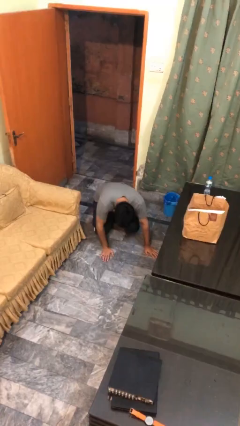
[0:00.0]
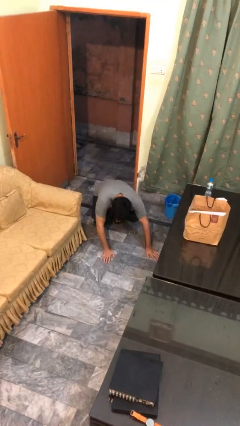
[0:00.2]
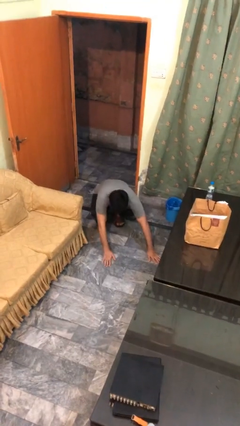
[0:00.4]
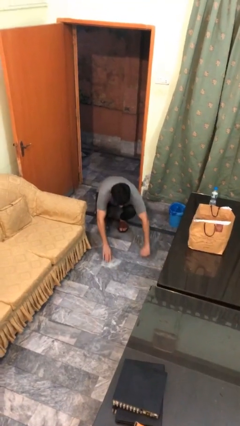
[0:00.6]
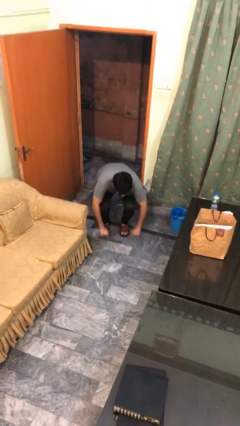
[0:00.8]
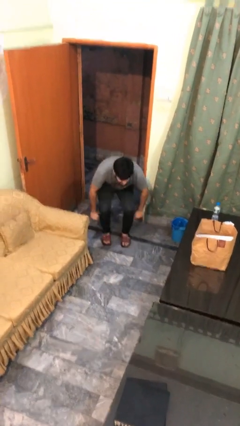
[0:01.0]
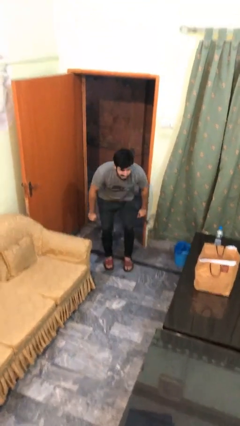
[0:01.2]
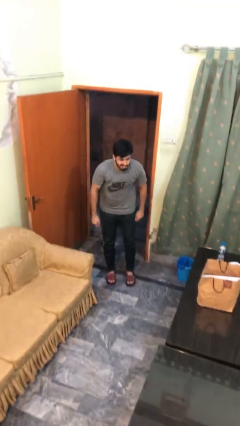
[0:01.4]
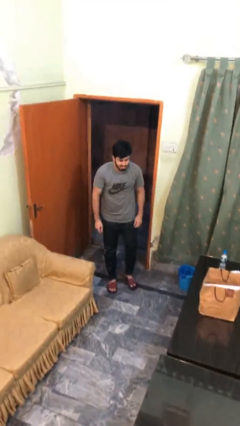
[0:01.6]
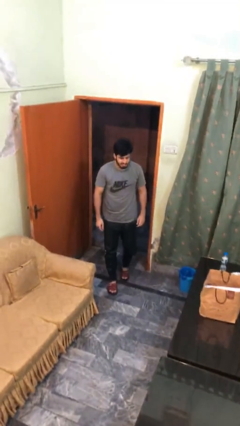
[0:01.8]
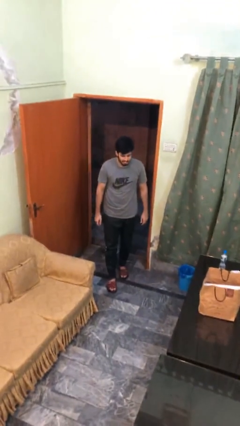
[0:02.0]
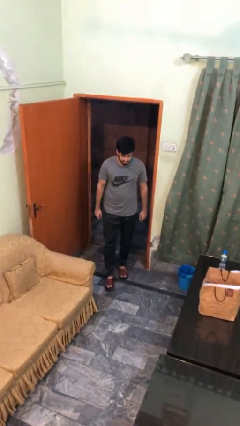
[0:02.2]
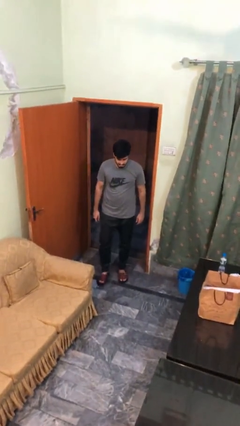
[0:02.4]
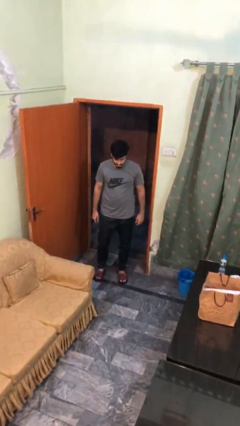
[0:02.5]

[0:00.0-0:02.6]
person stands up from floor

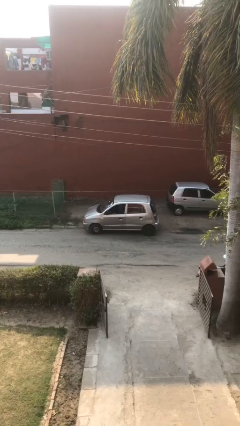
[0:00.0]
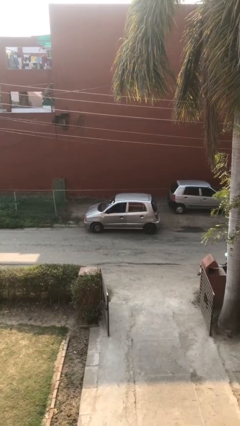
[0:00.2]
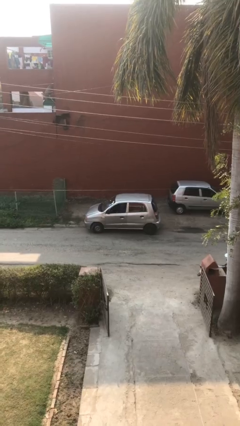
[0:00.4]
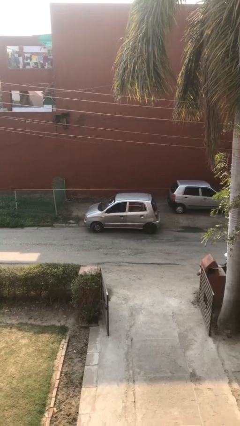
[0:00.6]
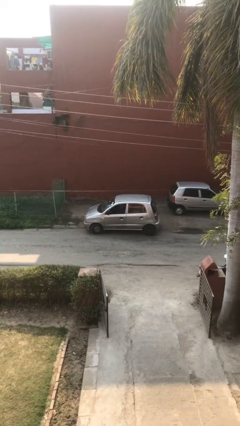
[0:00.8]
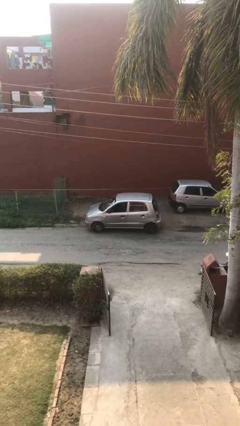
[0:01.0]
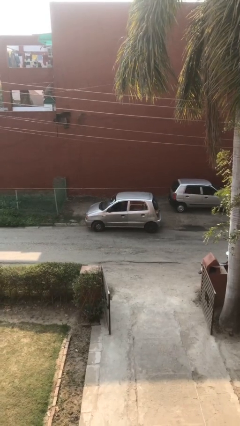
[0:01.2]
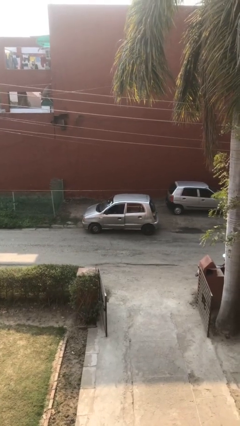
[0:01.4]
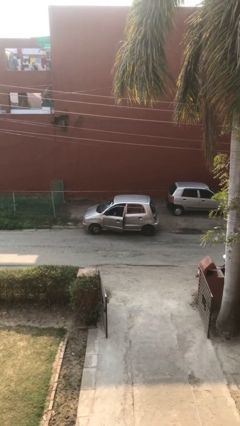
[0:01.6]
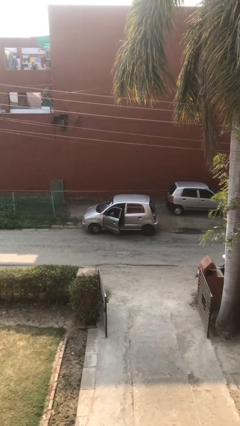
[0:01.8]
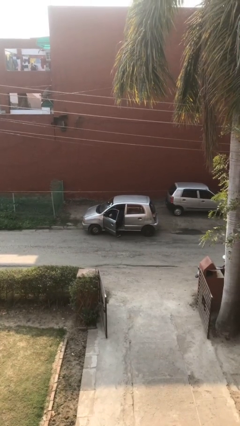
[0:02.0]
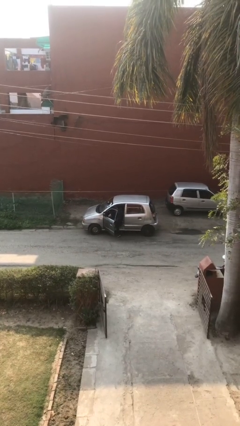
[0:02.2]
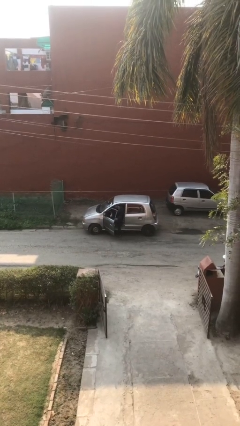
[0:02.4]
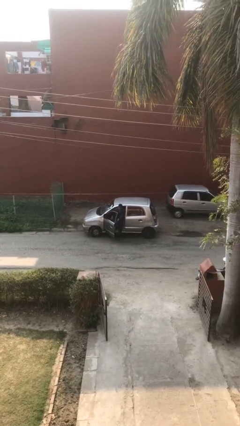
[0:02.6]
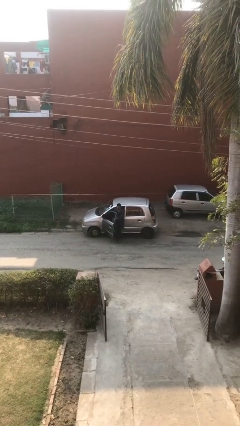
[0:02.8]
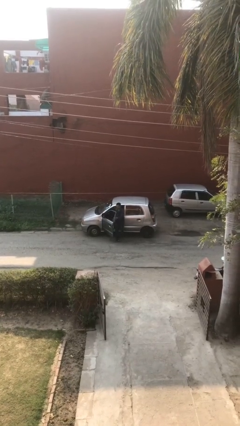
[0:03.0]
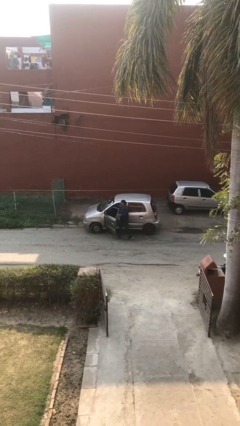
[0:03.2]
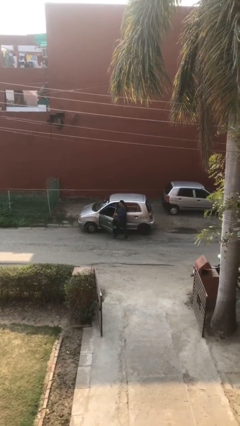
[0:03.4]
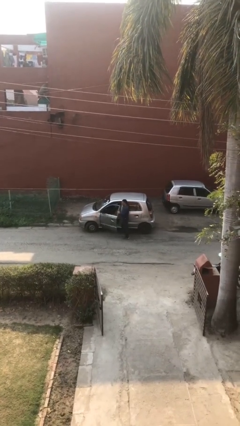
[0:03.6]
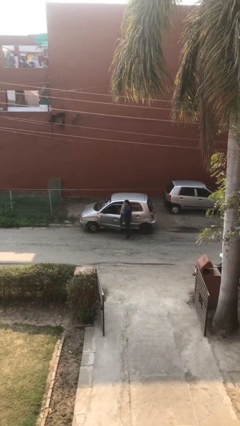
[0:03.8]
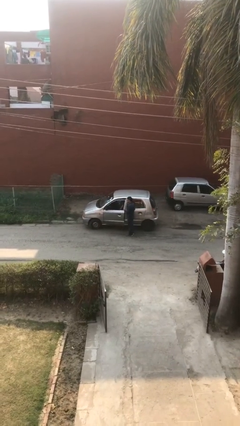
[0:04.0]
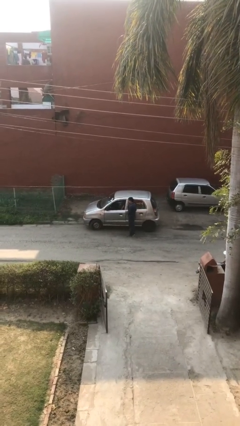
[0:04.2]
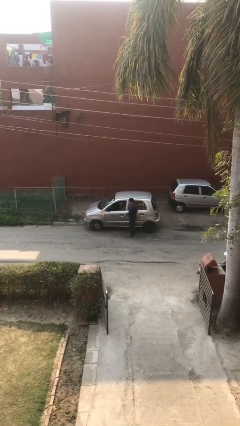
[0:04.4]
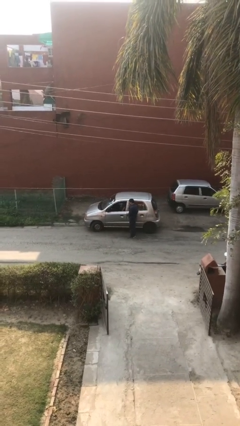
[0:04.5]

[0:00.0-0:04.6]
car drops off person

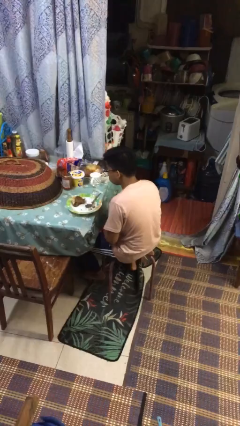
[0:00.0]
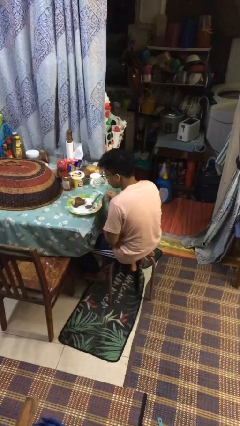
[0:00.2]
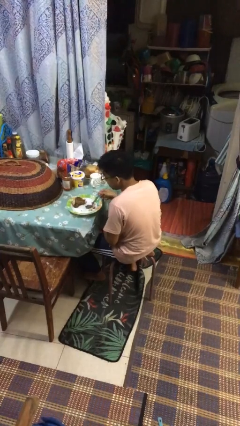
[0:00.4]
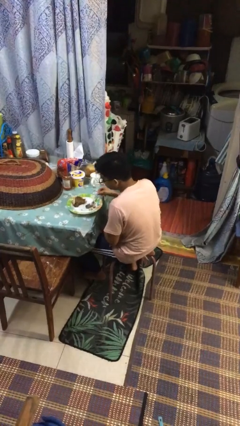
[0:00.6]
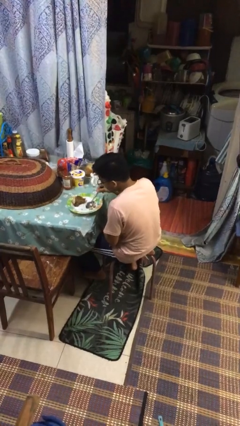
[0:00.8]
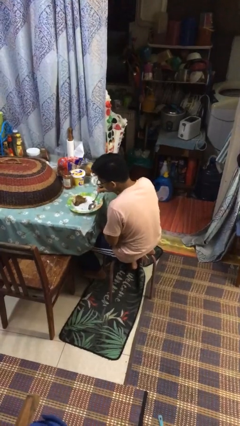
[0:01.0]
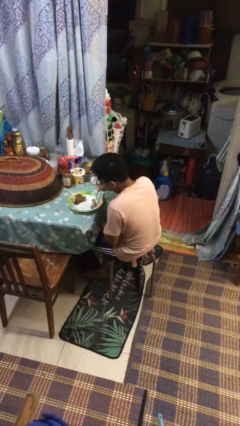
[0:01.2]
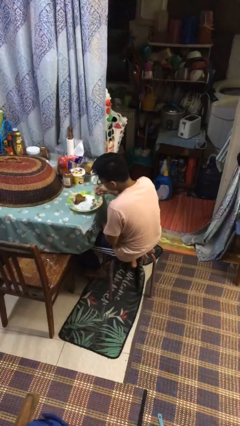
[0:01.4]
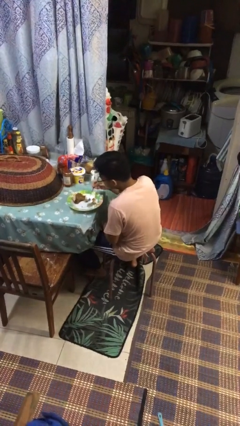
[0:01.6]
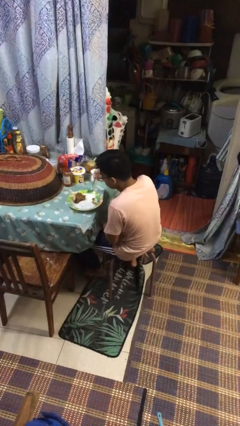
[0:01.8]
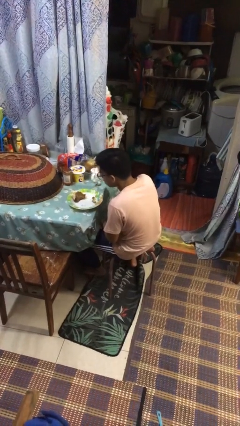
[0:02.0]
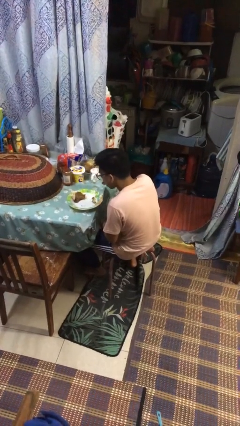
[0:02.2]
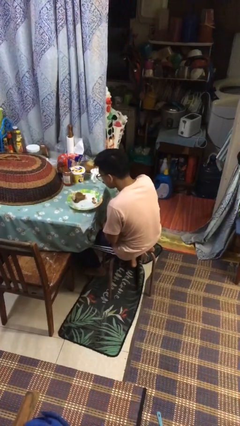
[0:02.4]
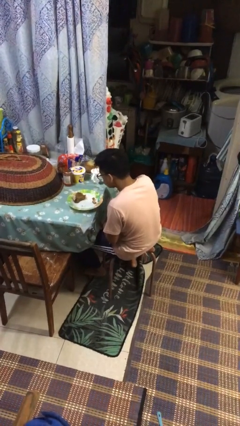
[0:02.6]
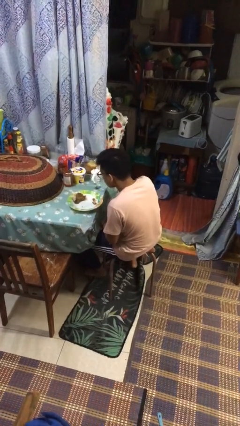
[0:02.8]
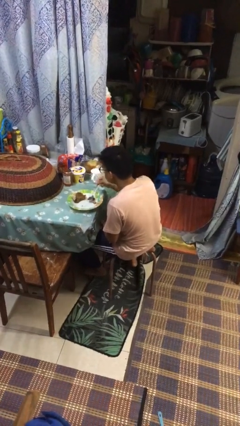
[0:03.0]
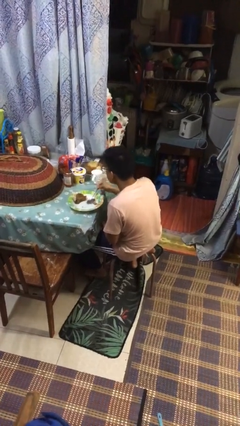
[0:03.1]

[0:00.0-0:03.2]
person eats with utensil

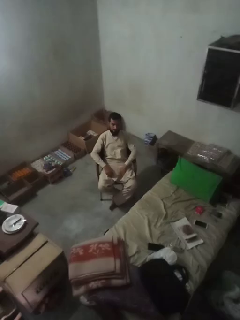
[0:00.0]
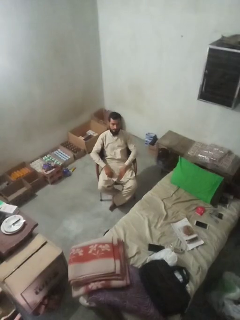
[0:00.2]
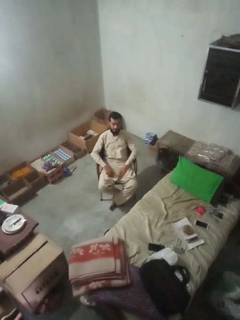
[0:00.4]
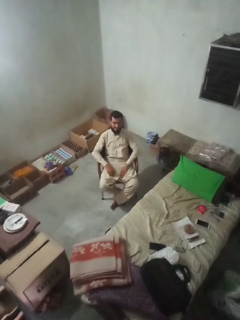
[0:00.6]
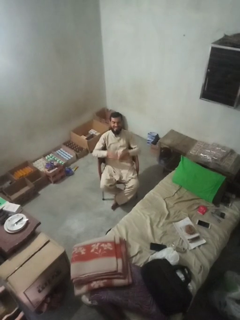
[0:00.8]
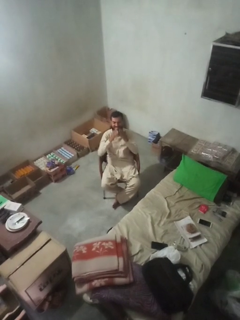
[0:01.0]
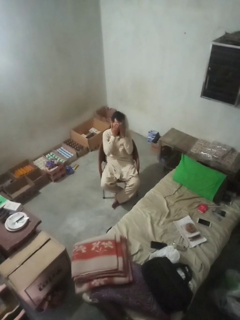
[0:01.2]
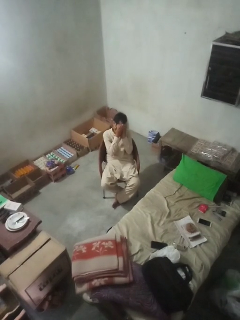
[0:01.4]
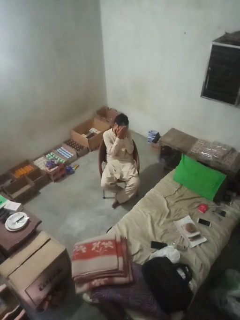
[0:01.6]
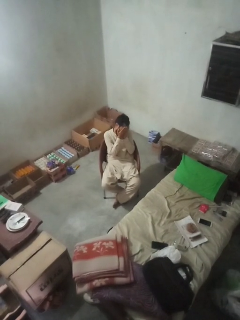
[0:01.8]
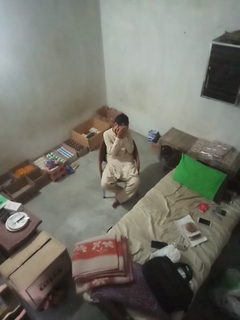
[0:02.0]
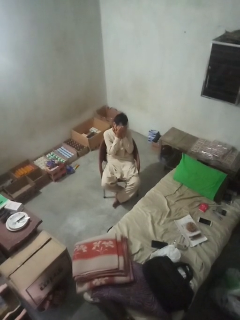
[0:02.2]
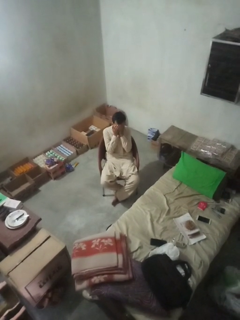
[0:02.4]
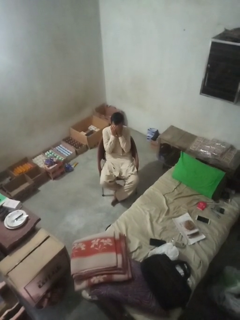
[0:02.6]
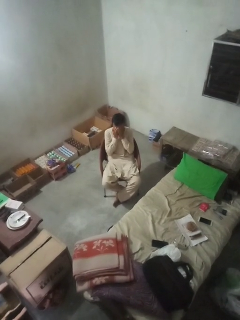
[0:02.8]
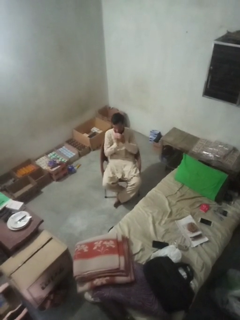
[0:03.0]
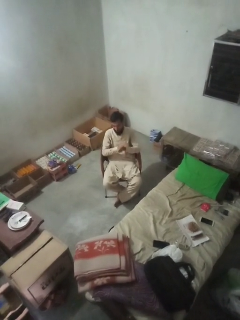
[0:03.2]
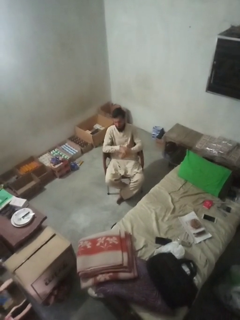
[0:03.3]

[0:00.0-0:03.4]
person covers face with hands

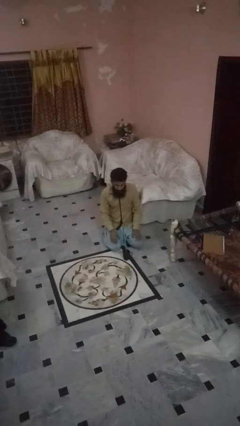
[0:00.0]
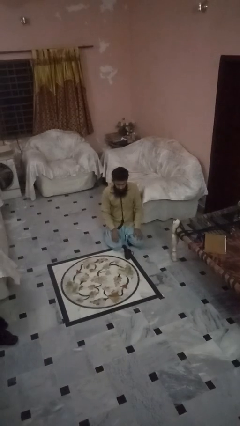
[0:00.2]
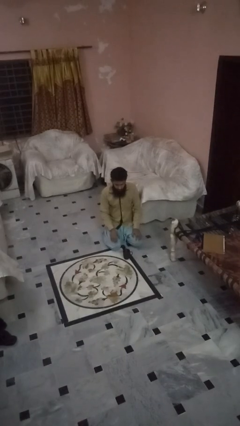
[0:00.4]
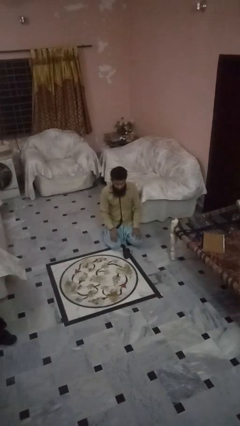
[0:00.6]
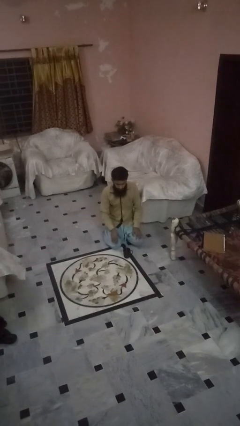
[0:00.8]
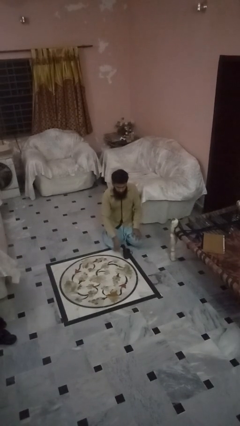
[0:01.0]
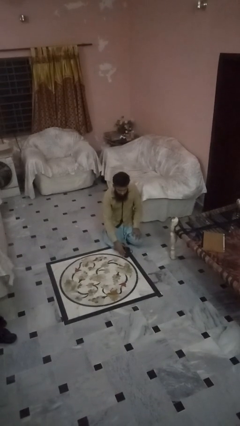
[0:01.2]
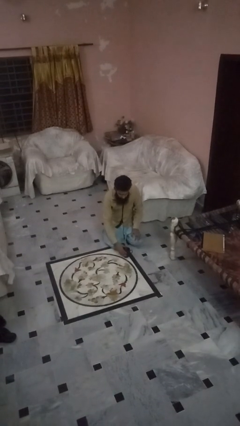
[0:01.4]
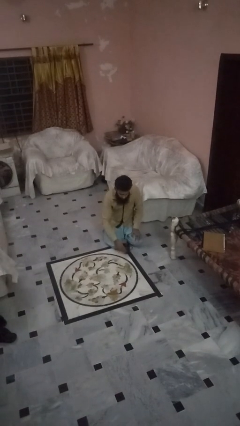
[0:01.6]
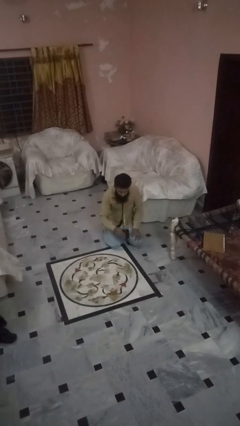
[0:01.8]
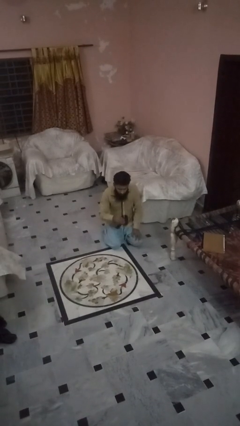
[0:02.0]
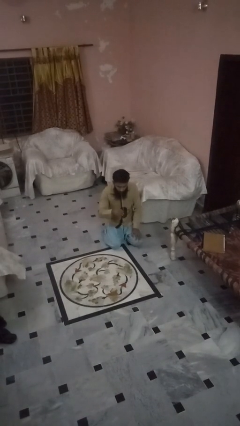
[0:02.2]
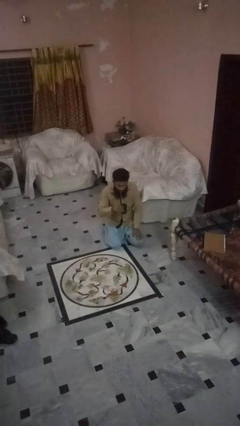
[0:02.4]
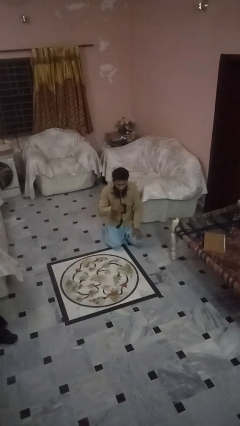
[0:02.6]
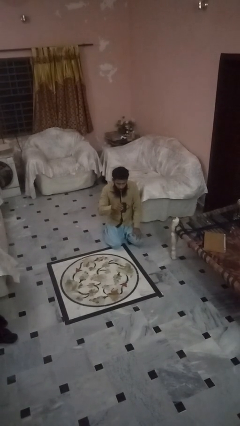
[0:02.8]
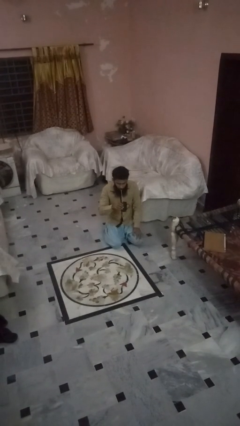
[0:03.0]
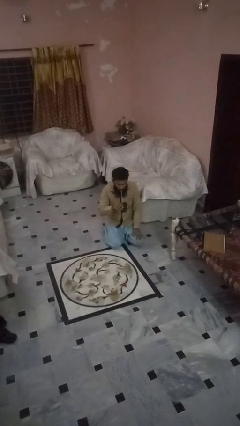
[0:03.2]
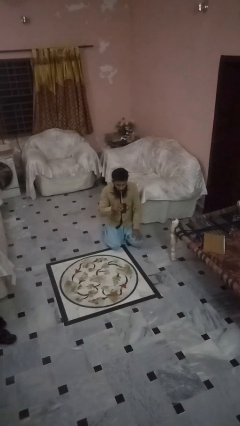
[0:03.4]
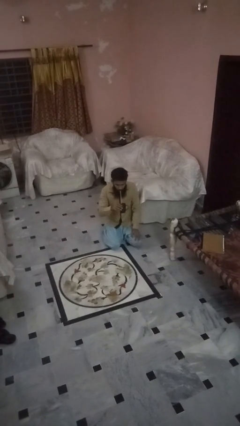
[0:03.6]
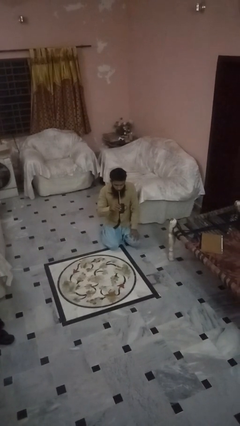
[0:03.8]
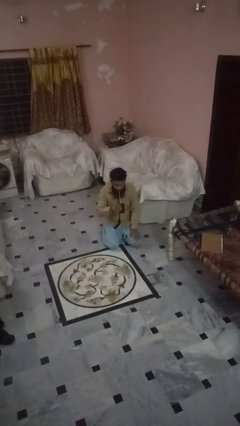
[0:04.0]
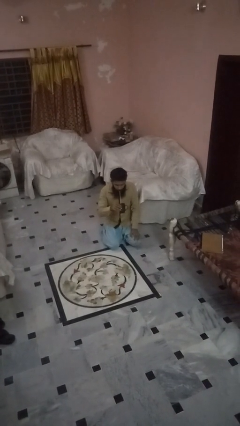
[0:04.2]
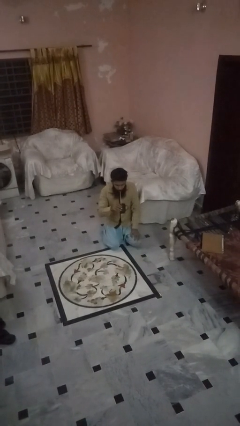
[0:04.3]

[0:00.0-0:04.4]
person drinks from straw
